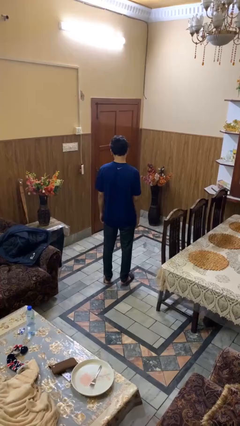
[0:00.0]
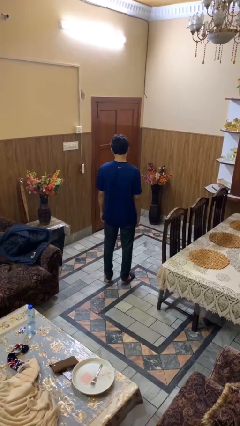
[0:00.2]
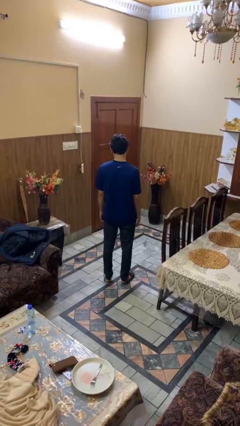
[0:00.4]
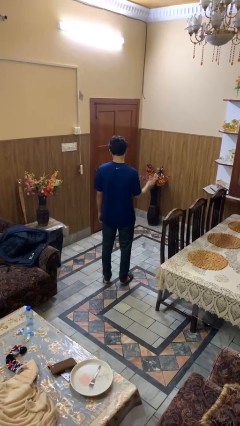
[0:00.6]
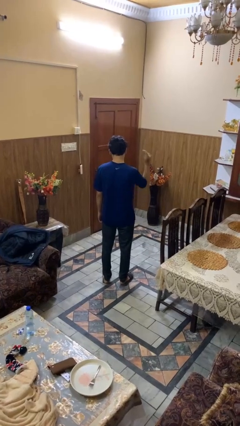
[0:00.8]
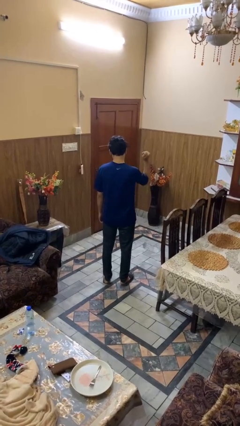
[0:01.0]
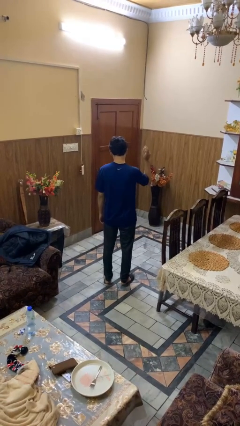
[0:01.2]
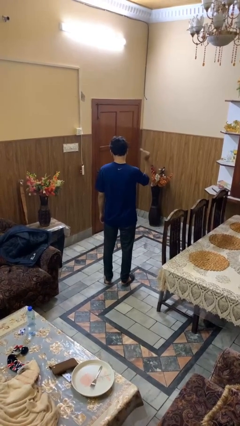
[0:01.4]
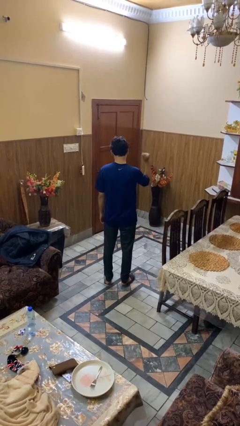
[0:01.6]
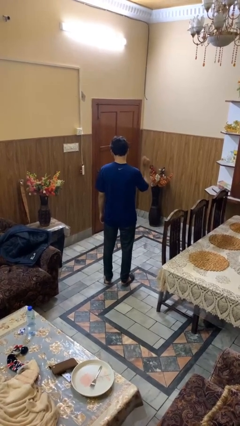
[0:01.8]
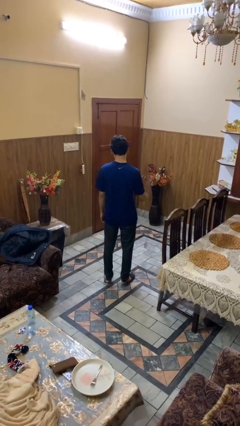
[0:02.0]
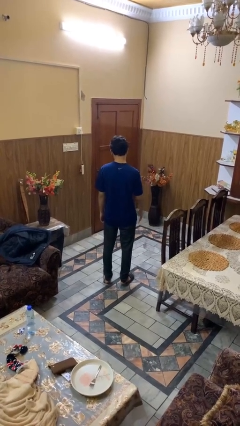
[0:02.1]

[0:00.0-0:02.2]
person snaps fingers

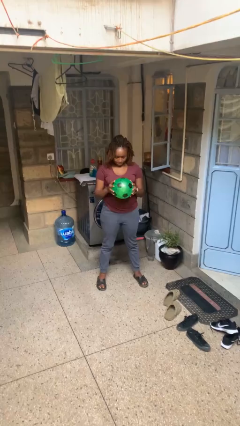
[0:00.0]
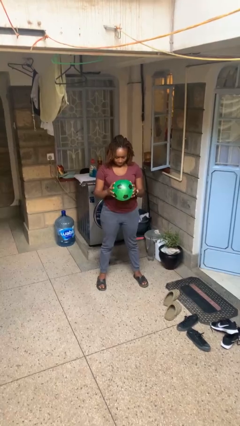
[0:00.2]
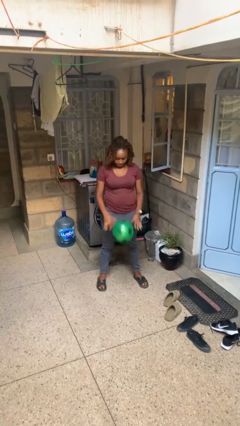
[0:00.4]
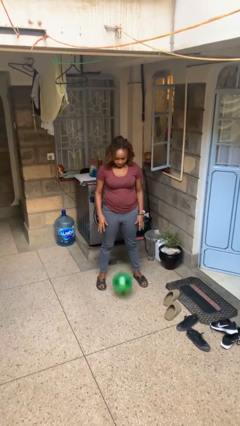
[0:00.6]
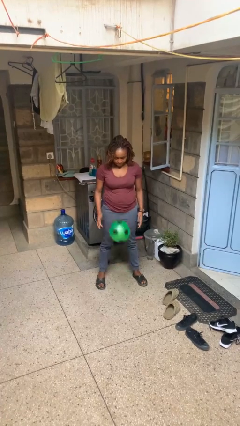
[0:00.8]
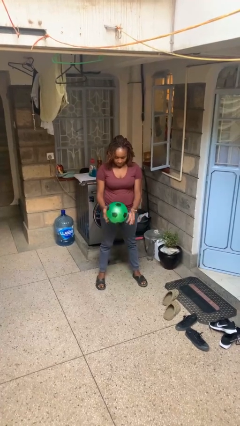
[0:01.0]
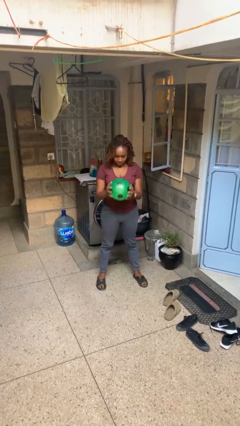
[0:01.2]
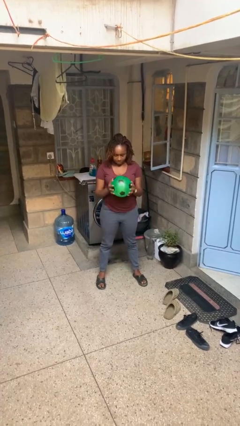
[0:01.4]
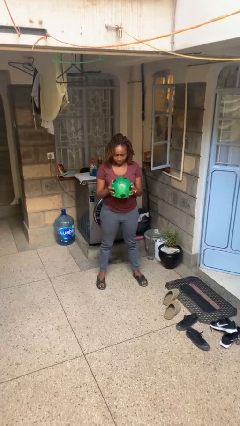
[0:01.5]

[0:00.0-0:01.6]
person bounces ball on floor

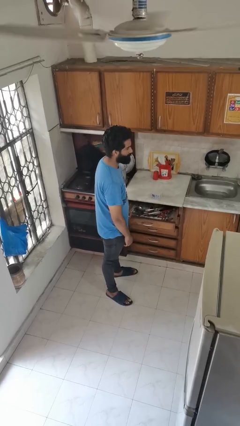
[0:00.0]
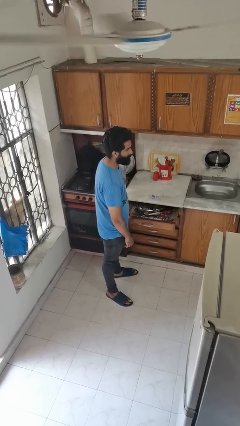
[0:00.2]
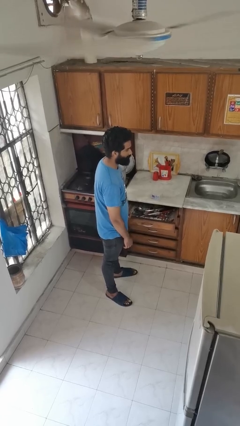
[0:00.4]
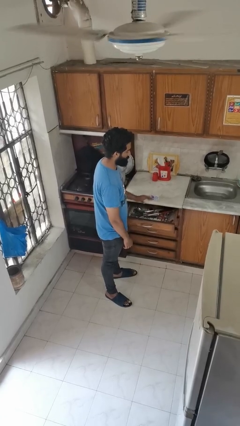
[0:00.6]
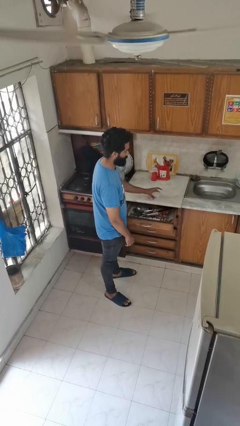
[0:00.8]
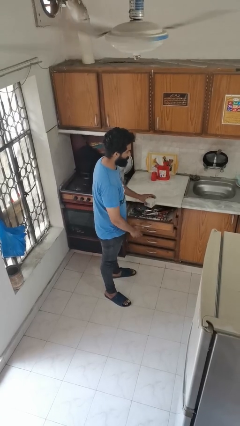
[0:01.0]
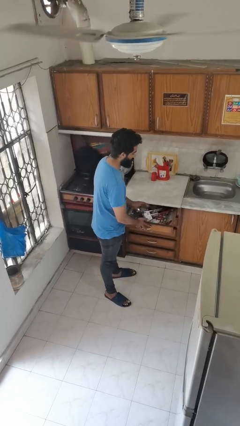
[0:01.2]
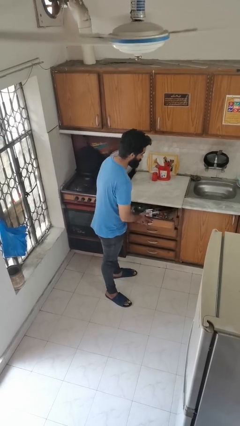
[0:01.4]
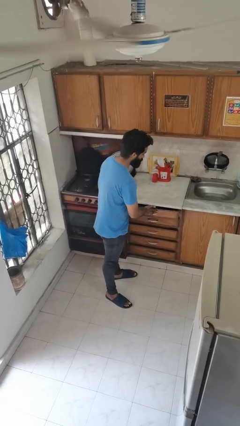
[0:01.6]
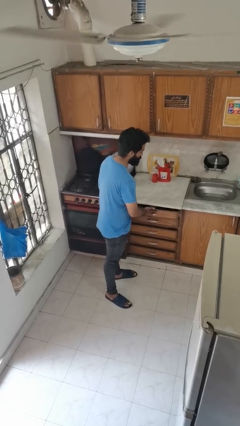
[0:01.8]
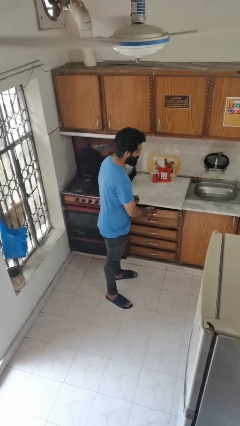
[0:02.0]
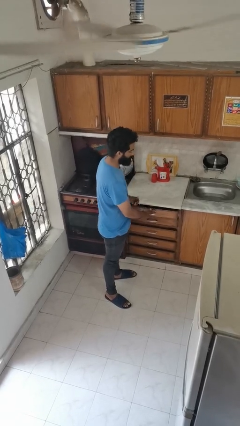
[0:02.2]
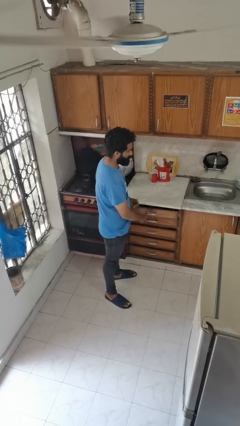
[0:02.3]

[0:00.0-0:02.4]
person puts object into kitchen drawer

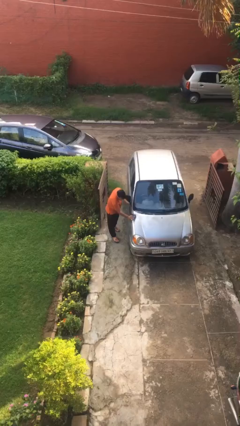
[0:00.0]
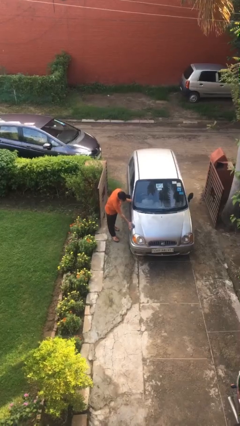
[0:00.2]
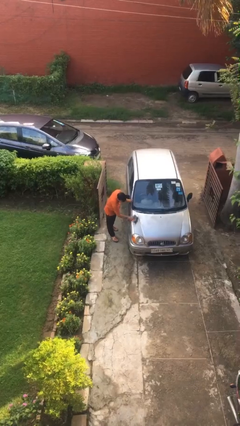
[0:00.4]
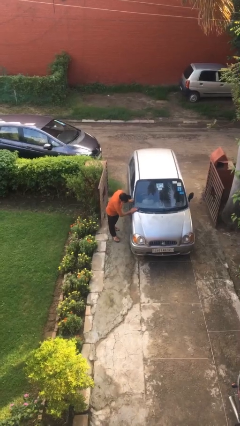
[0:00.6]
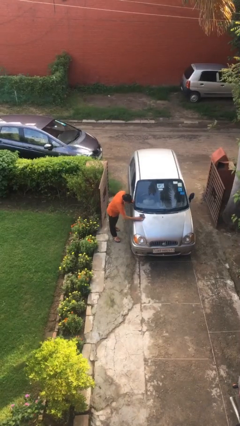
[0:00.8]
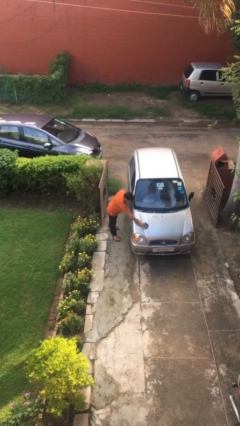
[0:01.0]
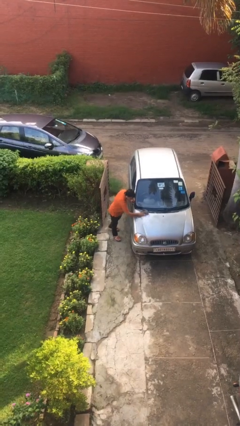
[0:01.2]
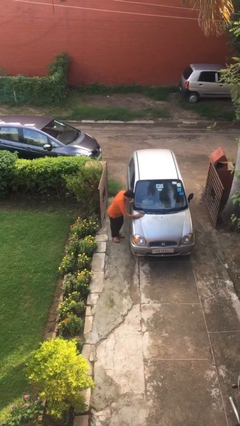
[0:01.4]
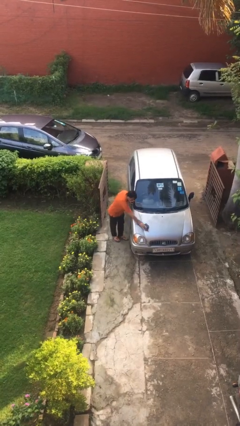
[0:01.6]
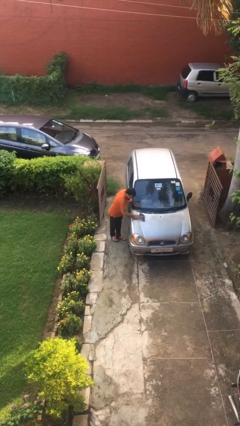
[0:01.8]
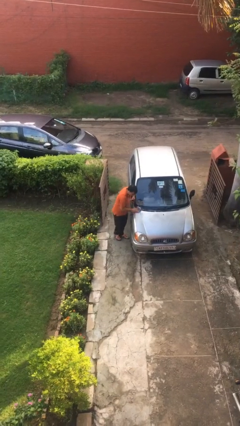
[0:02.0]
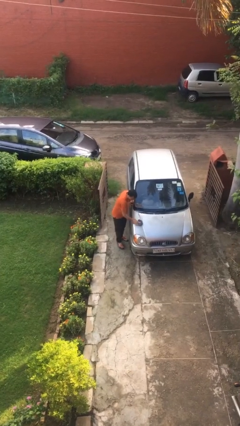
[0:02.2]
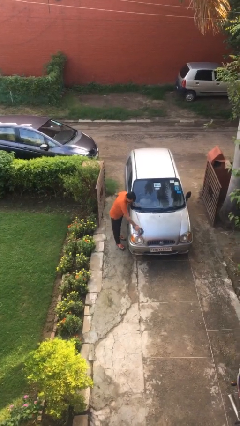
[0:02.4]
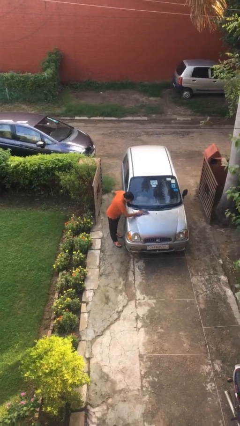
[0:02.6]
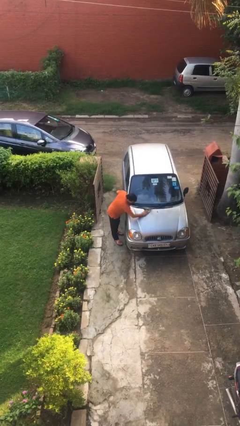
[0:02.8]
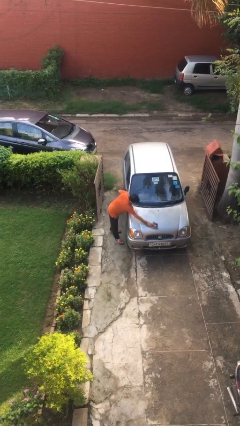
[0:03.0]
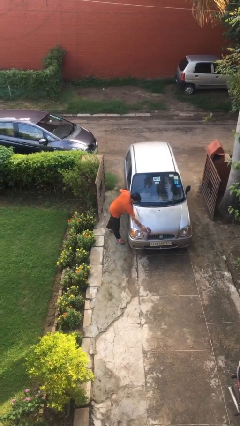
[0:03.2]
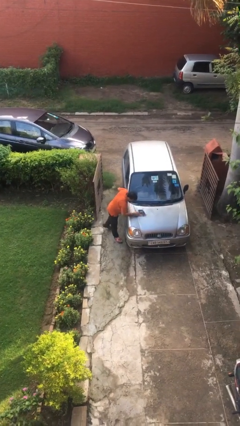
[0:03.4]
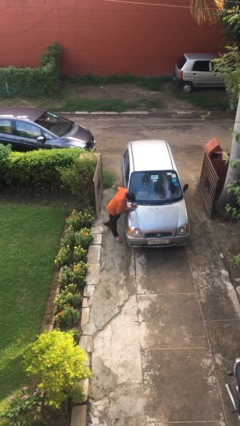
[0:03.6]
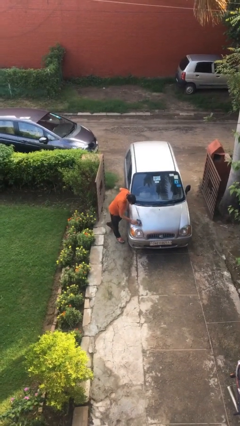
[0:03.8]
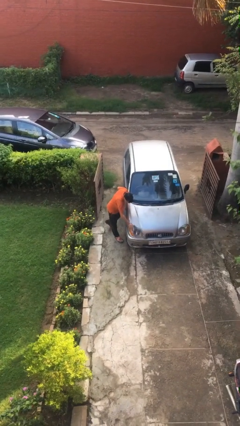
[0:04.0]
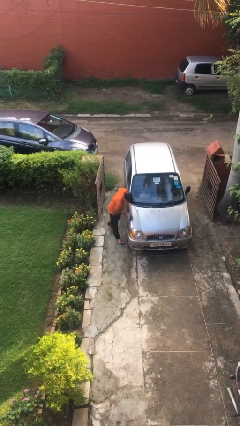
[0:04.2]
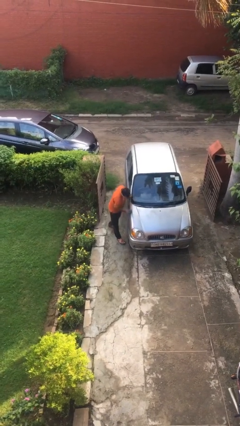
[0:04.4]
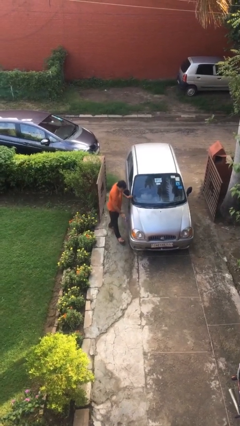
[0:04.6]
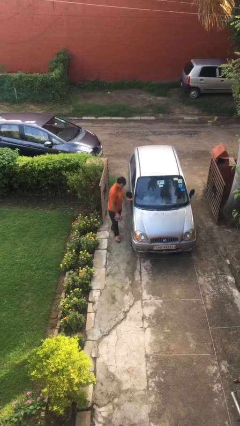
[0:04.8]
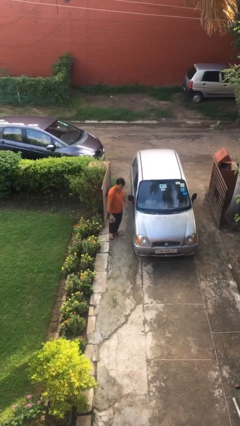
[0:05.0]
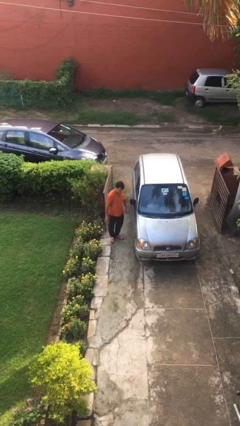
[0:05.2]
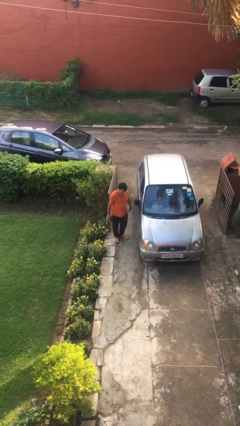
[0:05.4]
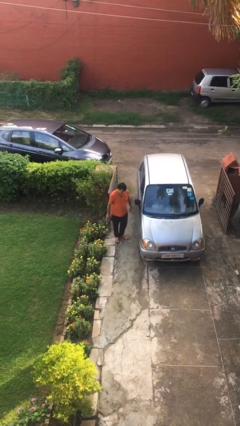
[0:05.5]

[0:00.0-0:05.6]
person polishes car with rag

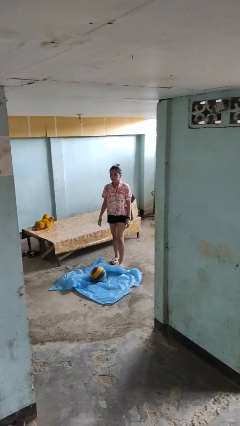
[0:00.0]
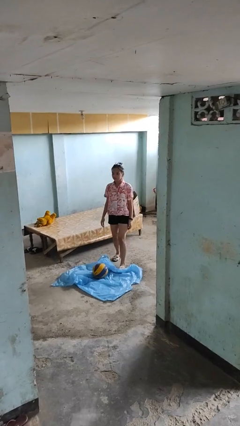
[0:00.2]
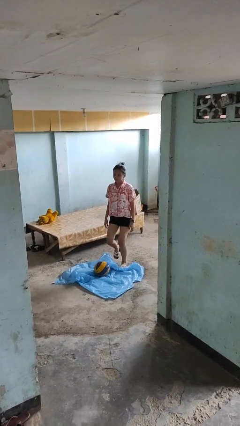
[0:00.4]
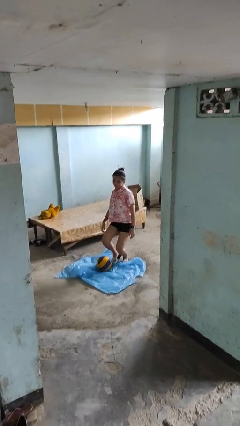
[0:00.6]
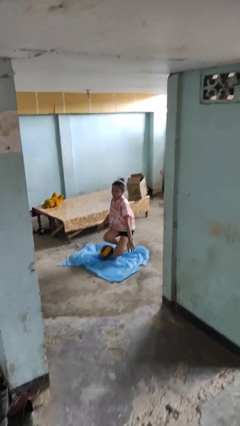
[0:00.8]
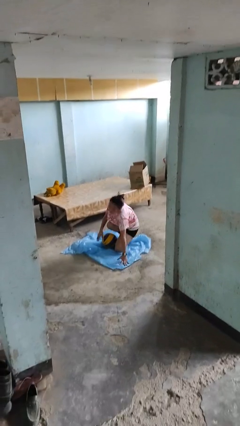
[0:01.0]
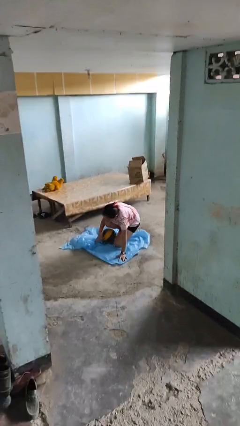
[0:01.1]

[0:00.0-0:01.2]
person trips on object on floor

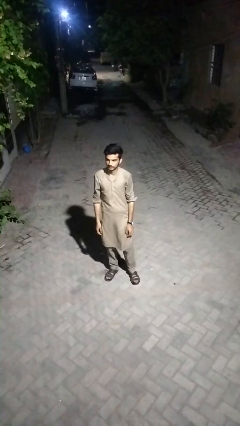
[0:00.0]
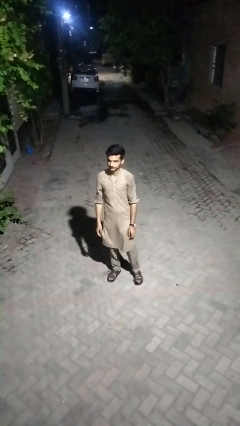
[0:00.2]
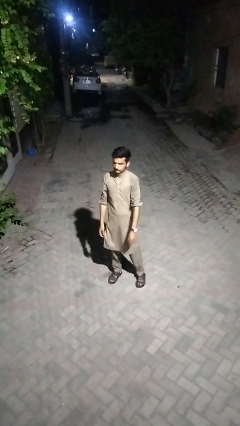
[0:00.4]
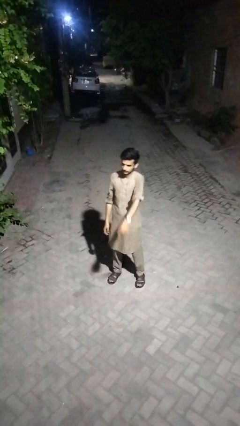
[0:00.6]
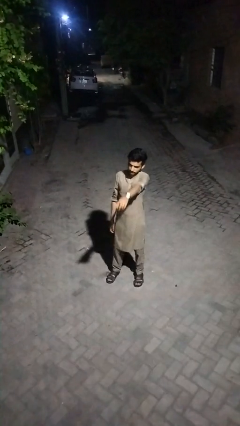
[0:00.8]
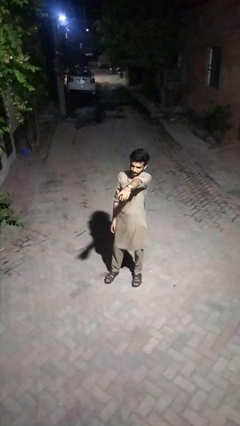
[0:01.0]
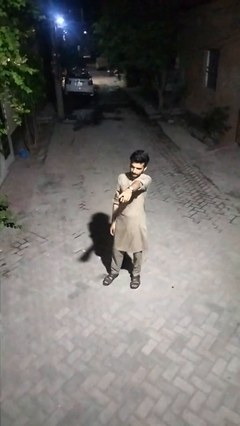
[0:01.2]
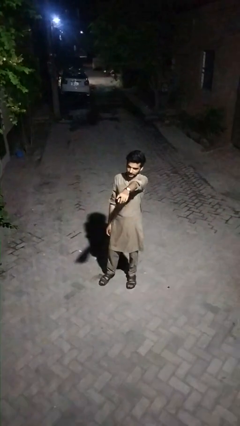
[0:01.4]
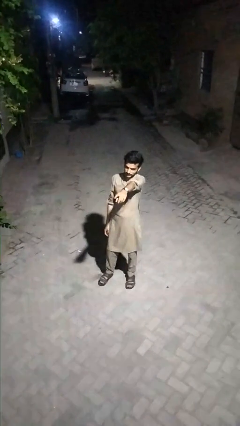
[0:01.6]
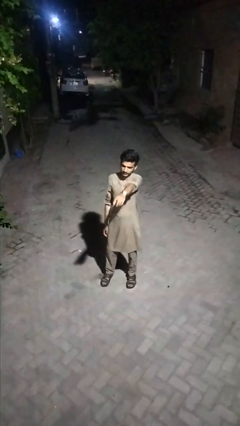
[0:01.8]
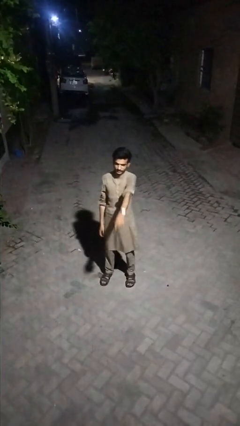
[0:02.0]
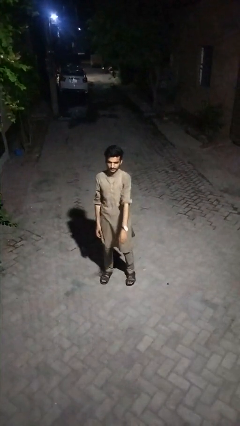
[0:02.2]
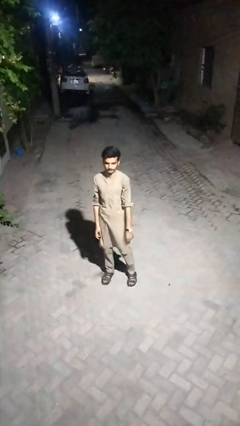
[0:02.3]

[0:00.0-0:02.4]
person points at person

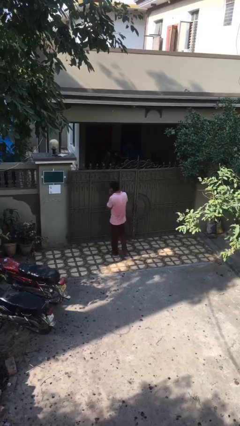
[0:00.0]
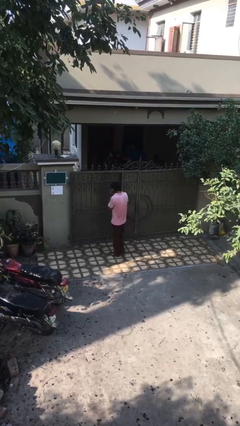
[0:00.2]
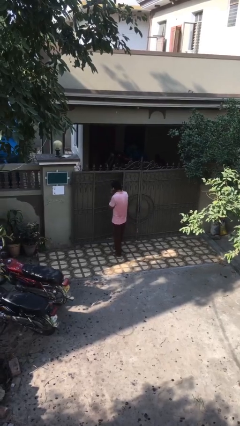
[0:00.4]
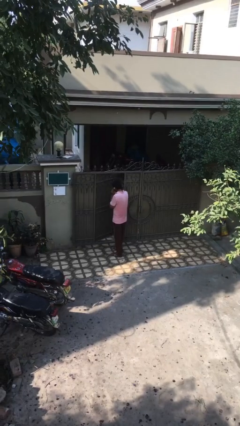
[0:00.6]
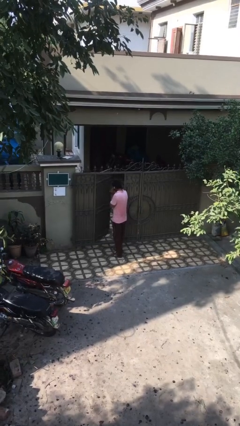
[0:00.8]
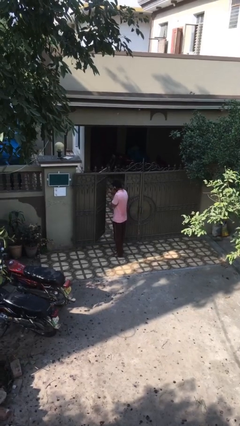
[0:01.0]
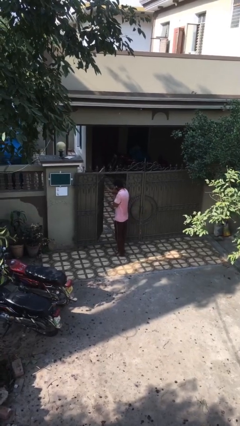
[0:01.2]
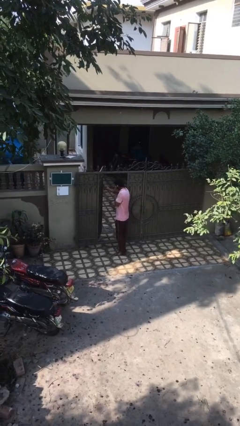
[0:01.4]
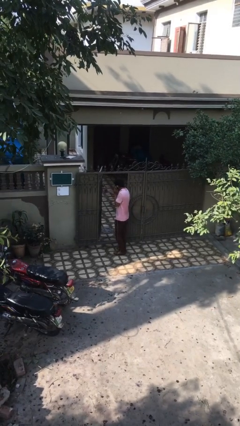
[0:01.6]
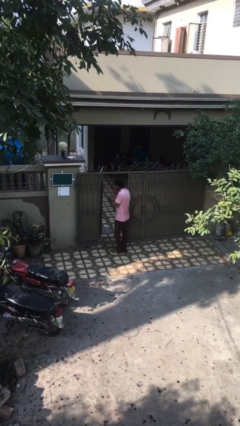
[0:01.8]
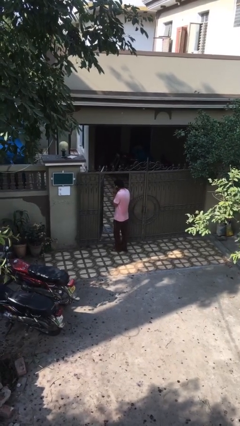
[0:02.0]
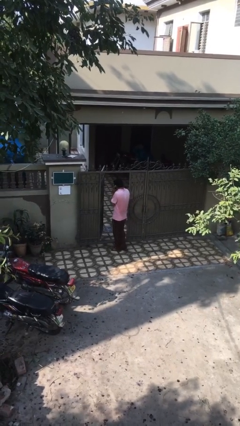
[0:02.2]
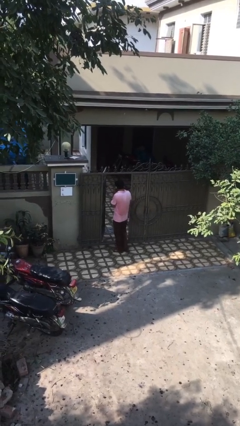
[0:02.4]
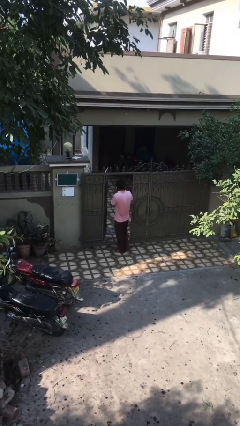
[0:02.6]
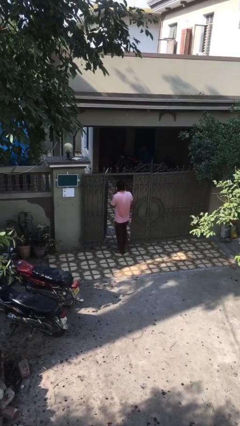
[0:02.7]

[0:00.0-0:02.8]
person opens facility door
